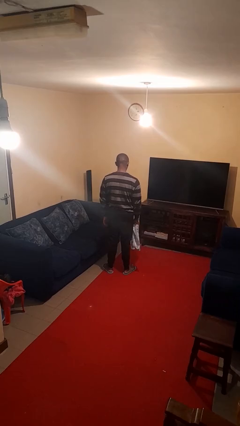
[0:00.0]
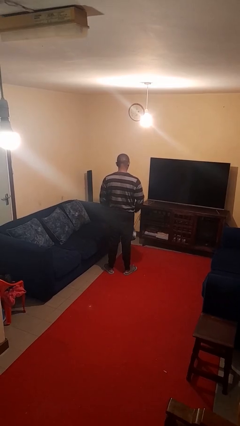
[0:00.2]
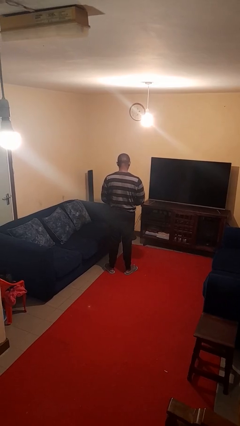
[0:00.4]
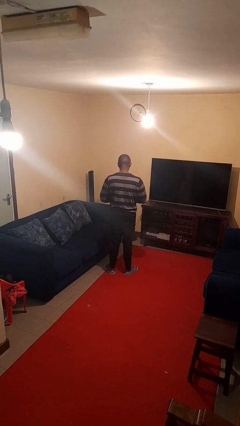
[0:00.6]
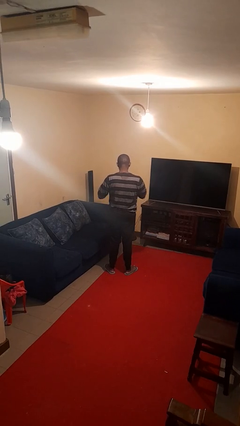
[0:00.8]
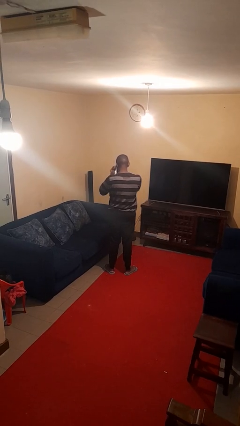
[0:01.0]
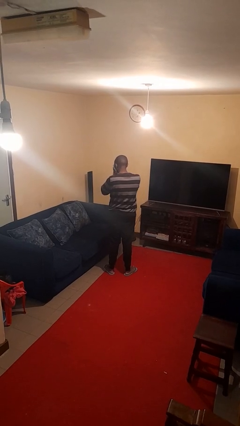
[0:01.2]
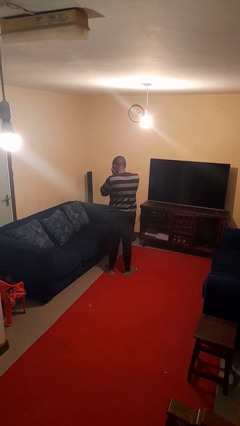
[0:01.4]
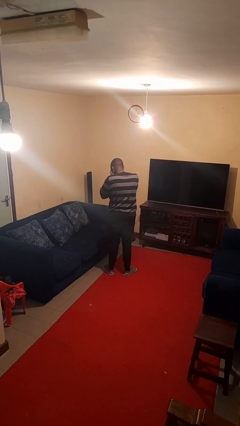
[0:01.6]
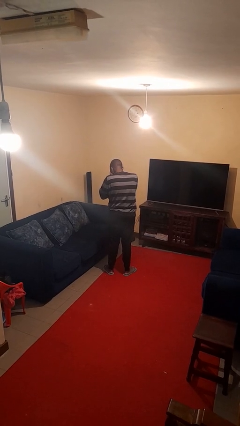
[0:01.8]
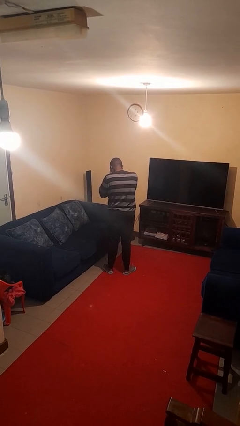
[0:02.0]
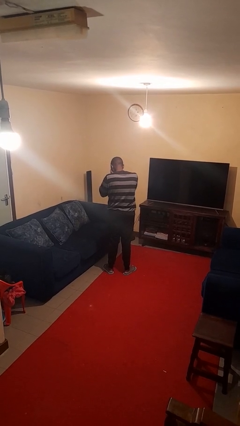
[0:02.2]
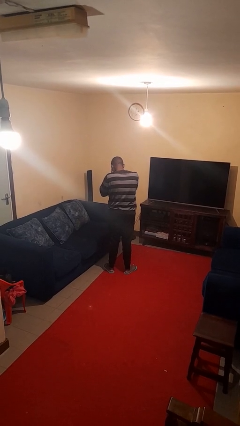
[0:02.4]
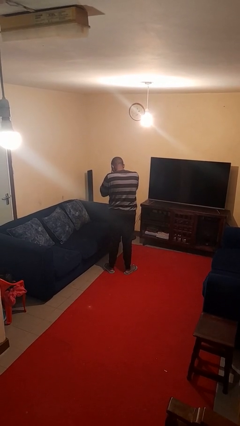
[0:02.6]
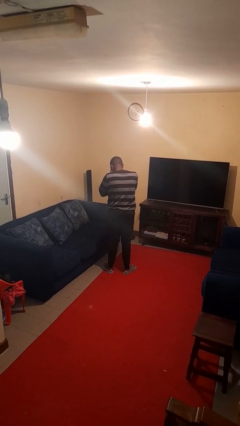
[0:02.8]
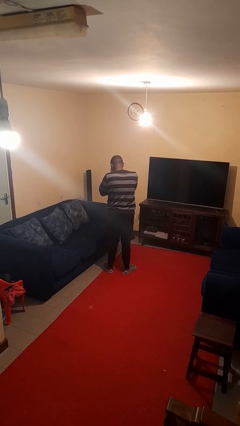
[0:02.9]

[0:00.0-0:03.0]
person blows nose

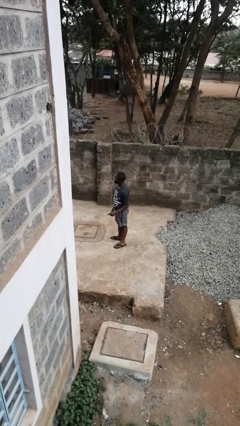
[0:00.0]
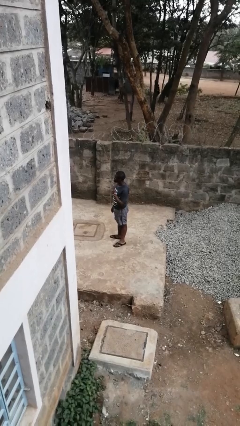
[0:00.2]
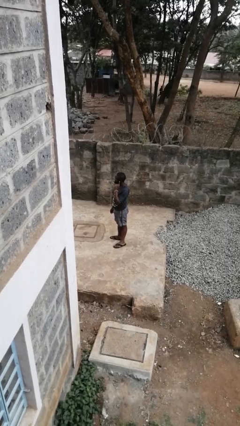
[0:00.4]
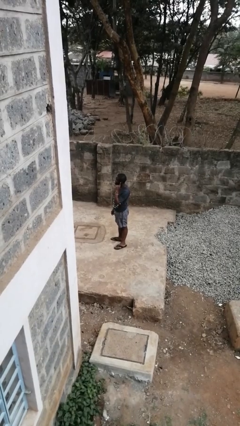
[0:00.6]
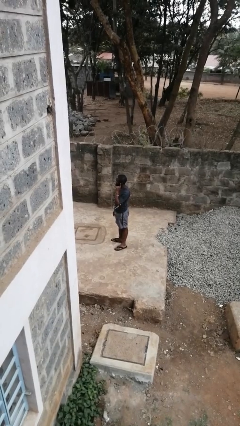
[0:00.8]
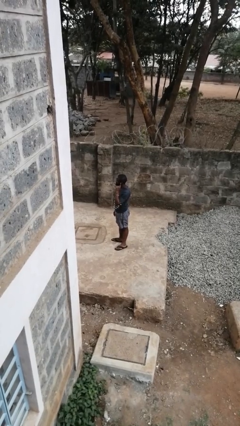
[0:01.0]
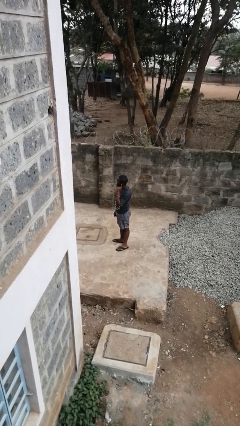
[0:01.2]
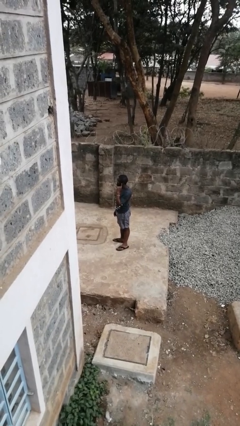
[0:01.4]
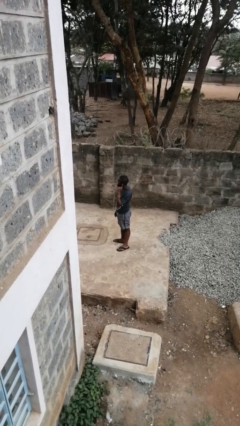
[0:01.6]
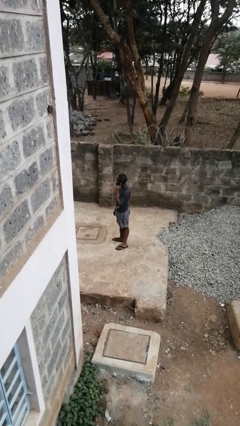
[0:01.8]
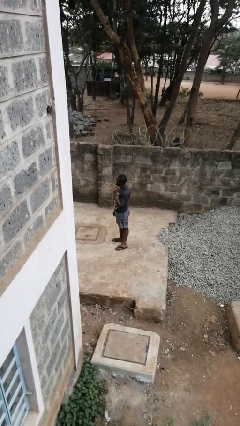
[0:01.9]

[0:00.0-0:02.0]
person gestures listen closely

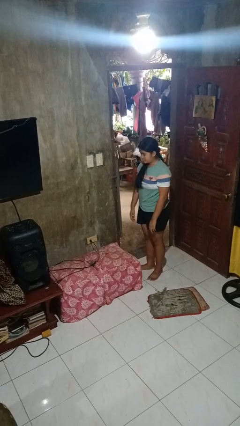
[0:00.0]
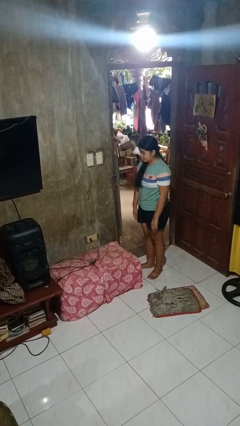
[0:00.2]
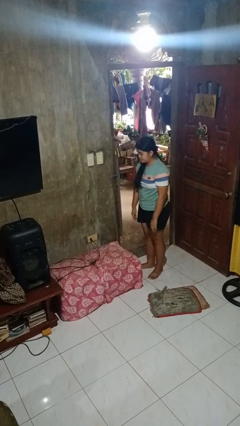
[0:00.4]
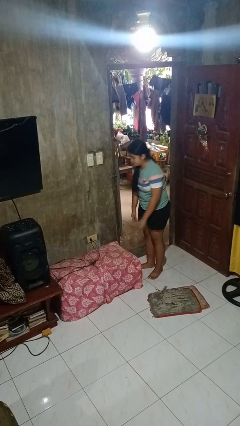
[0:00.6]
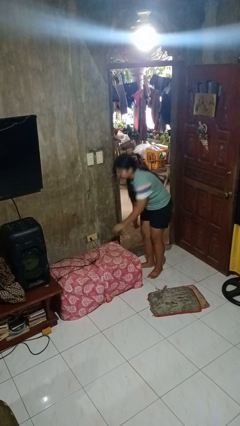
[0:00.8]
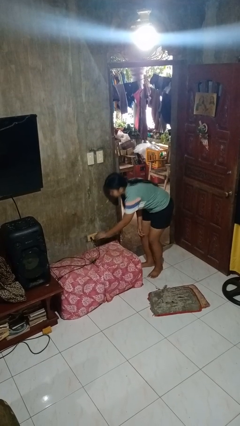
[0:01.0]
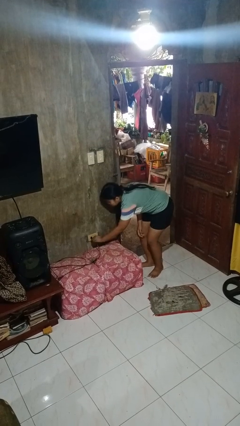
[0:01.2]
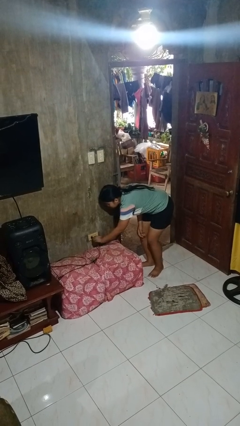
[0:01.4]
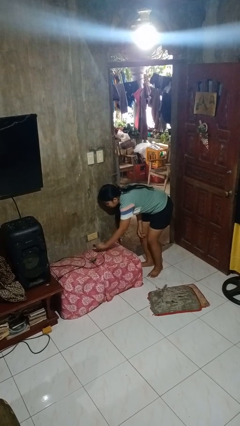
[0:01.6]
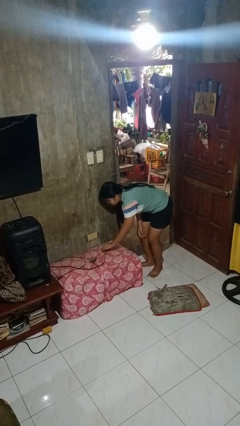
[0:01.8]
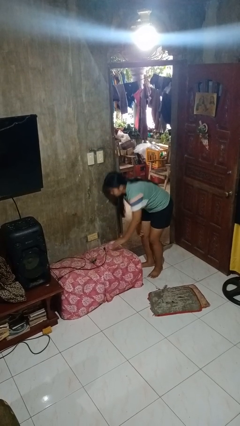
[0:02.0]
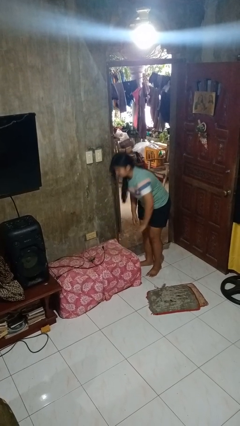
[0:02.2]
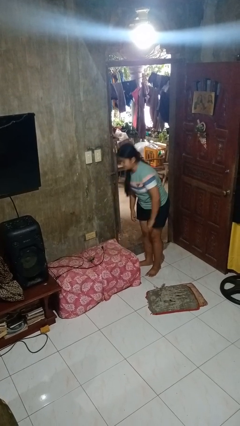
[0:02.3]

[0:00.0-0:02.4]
person unplugs from electrical socket

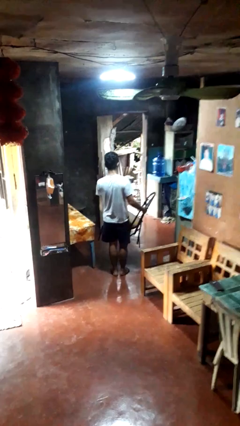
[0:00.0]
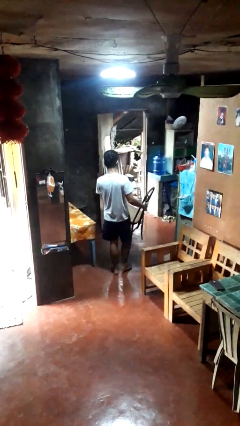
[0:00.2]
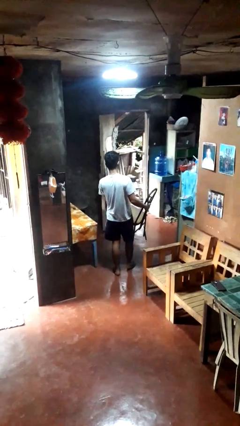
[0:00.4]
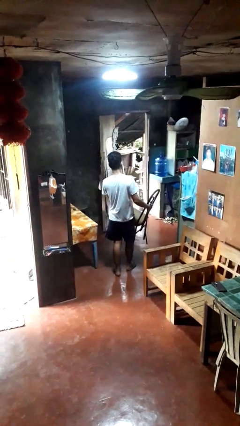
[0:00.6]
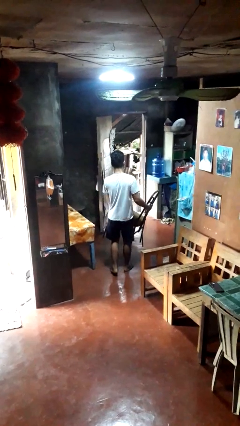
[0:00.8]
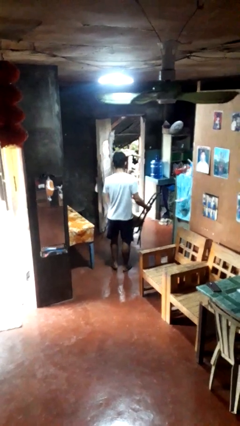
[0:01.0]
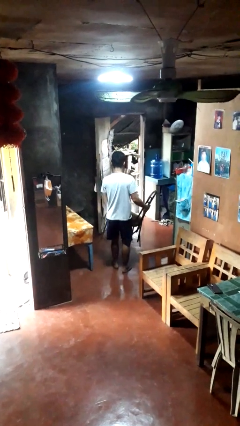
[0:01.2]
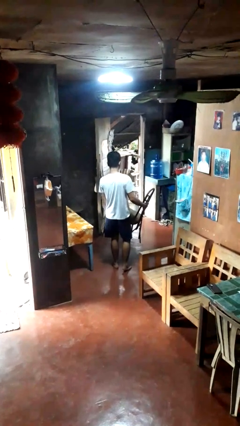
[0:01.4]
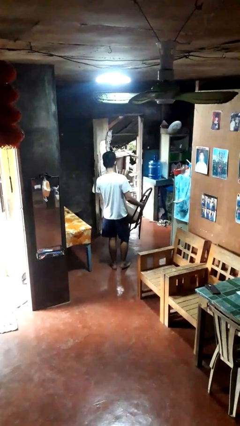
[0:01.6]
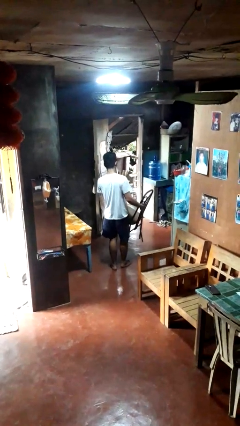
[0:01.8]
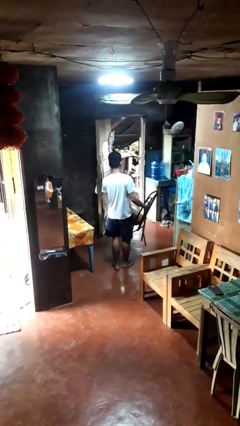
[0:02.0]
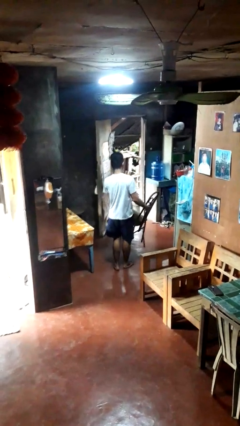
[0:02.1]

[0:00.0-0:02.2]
person carries furniture

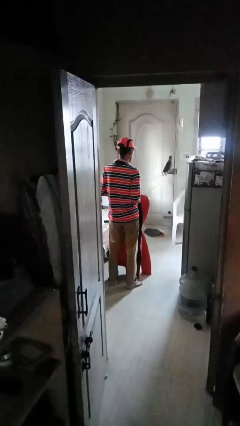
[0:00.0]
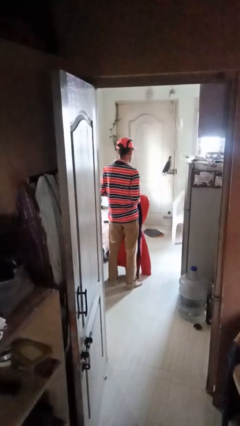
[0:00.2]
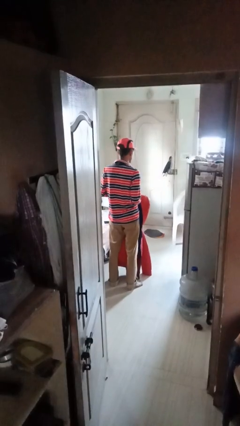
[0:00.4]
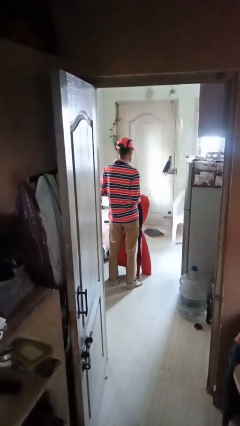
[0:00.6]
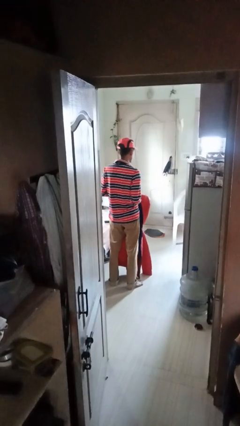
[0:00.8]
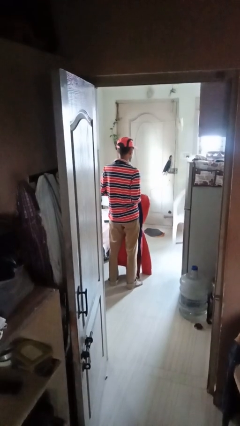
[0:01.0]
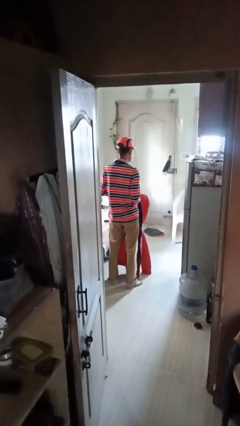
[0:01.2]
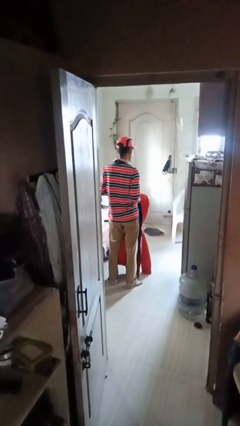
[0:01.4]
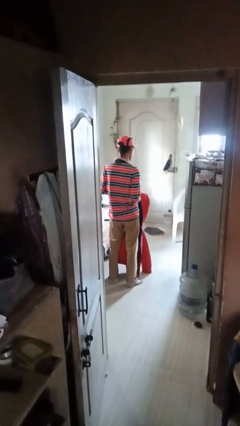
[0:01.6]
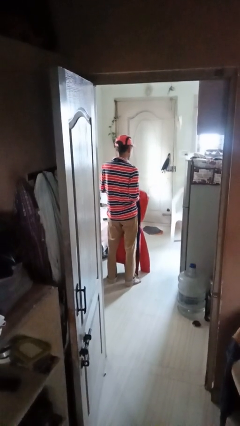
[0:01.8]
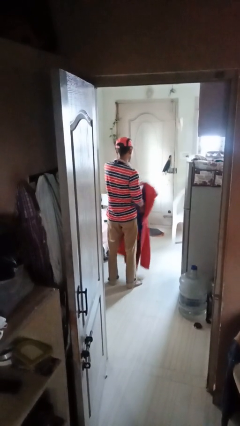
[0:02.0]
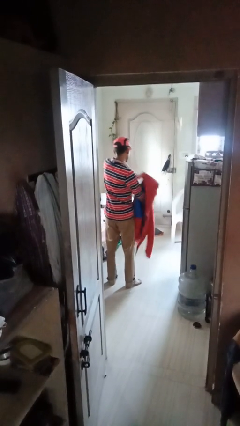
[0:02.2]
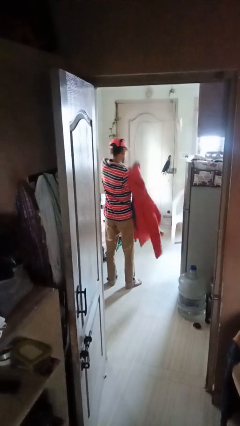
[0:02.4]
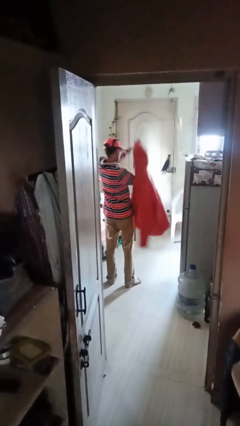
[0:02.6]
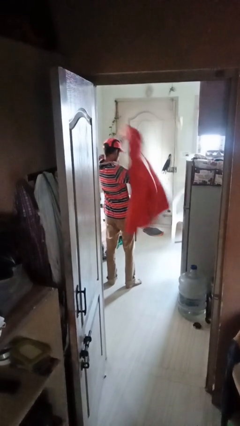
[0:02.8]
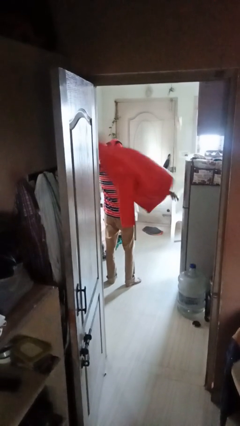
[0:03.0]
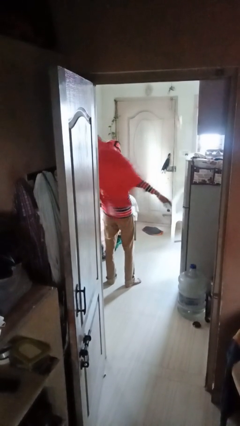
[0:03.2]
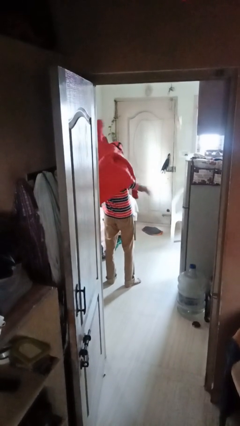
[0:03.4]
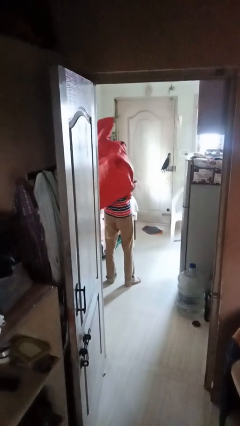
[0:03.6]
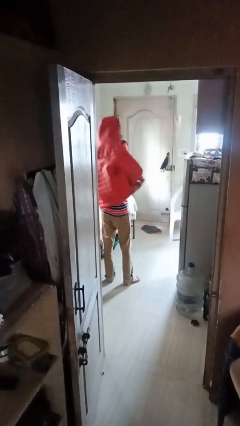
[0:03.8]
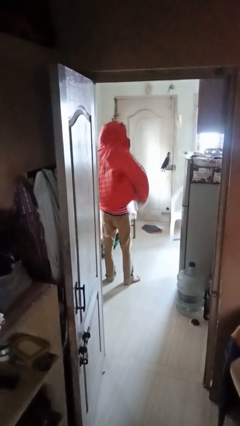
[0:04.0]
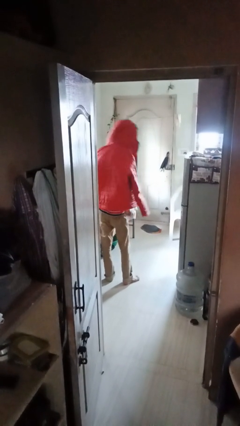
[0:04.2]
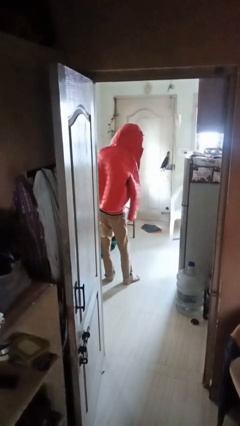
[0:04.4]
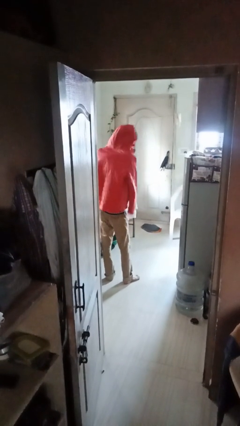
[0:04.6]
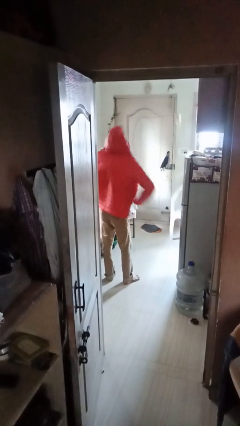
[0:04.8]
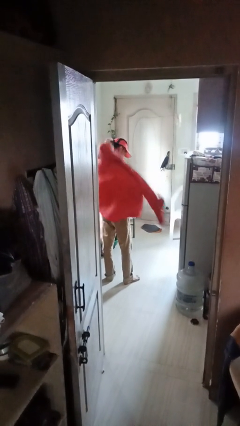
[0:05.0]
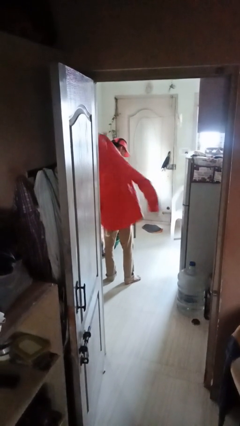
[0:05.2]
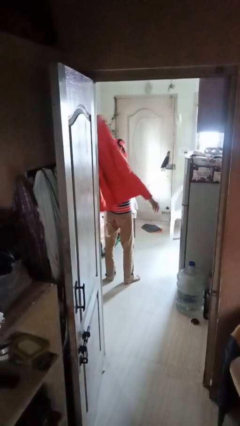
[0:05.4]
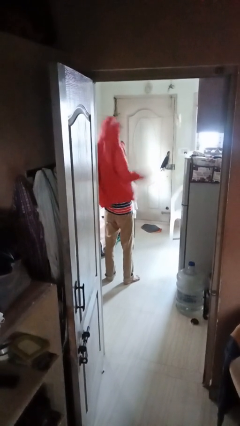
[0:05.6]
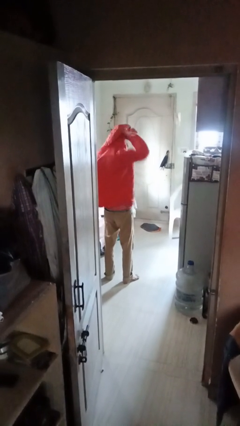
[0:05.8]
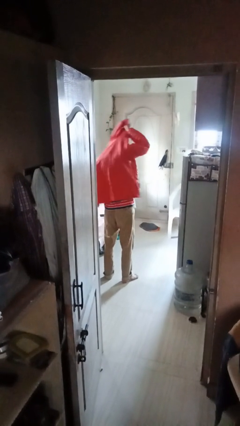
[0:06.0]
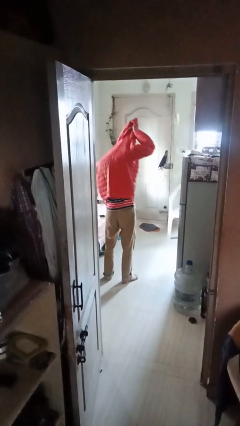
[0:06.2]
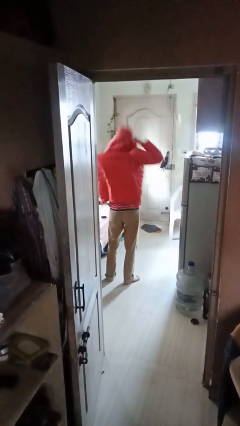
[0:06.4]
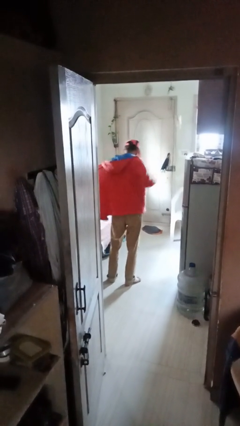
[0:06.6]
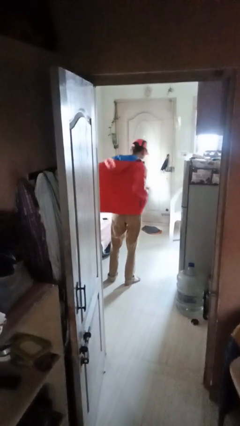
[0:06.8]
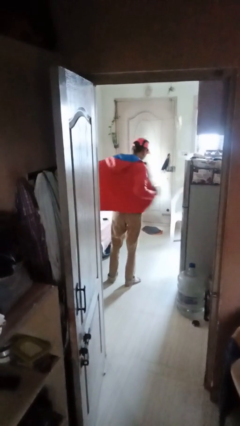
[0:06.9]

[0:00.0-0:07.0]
person puts on jacket

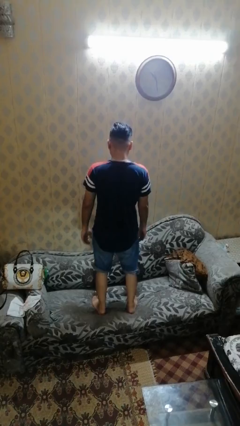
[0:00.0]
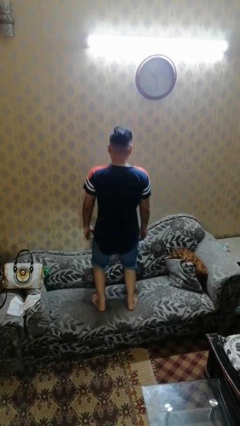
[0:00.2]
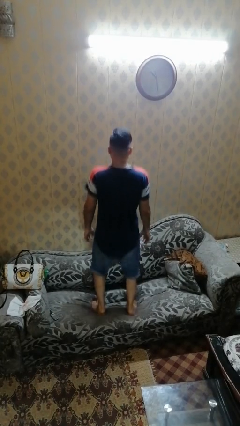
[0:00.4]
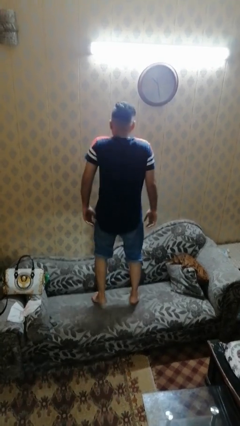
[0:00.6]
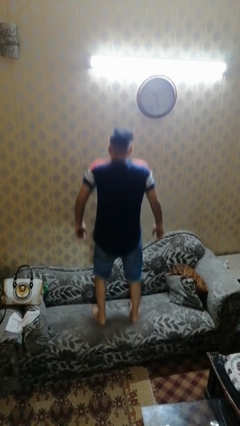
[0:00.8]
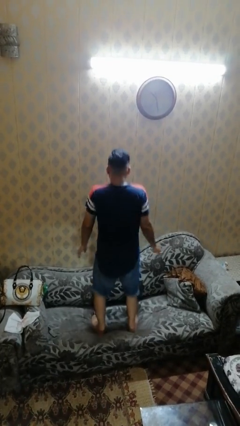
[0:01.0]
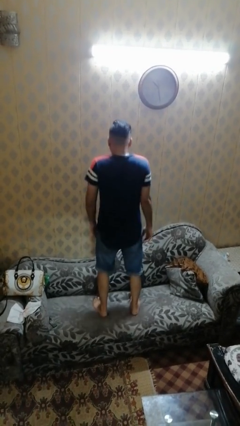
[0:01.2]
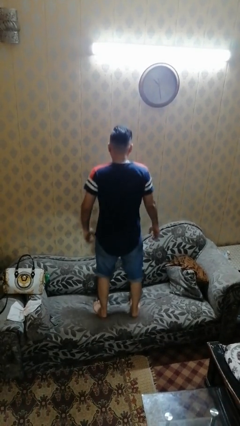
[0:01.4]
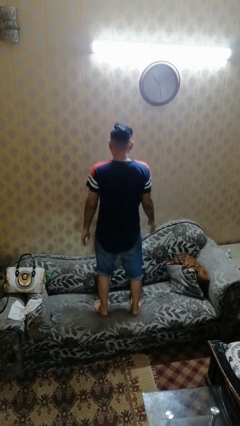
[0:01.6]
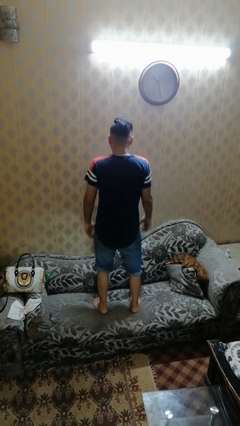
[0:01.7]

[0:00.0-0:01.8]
person jumps on couch
